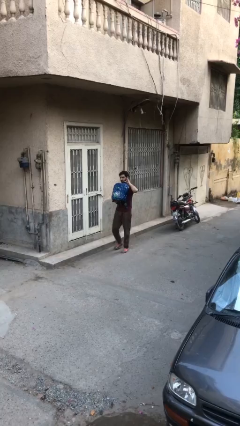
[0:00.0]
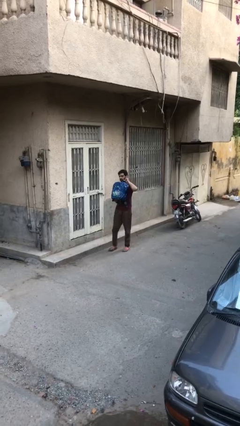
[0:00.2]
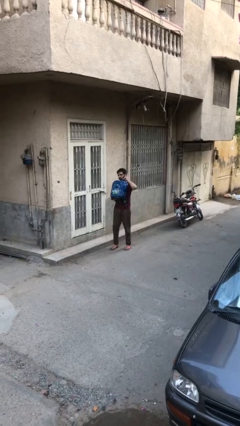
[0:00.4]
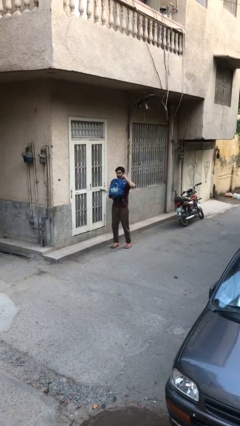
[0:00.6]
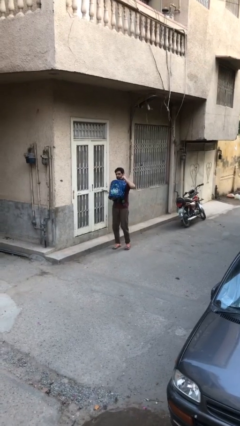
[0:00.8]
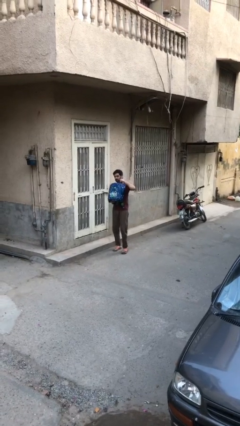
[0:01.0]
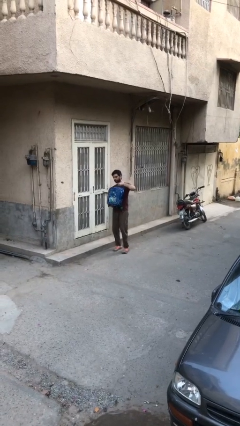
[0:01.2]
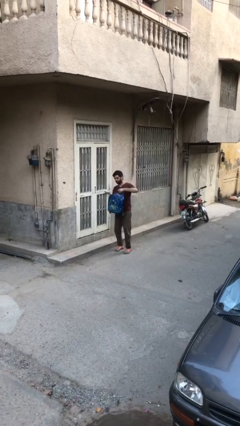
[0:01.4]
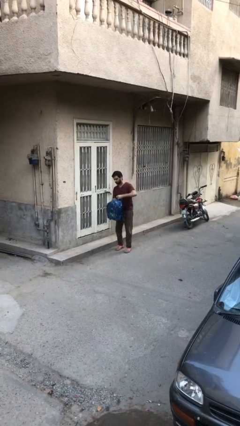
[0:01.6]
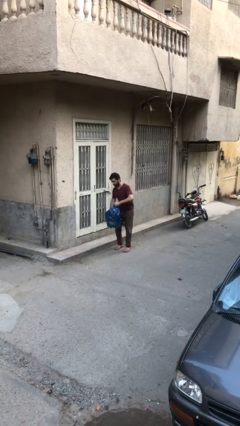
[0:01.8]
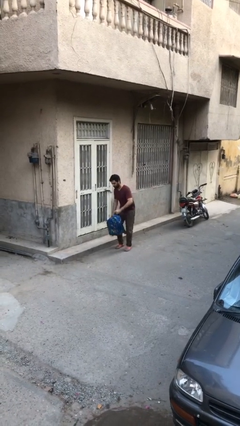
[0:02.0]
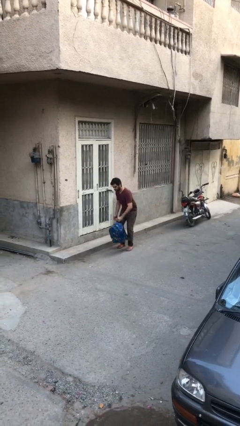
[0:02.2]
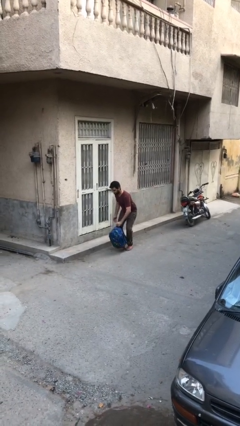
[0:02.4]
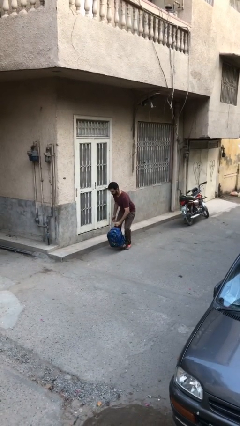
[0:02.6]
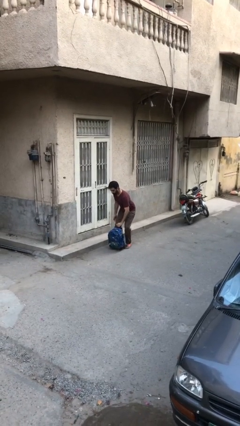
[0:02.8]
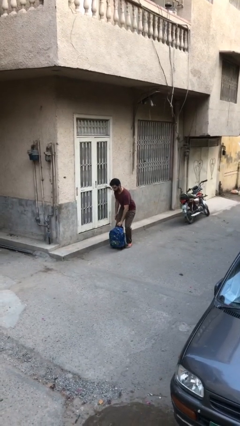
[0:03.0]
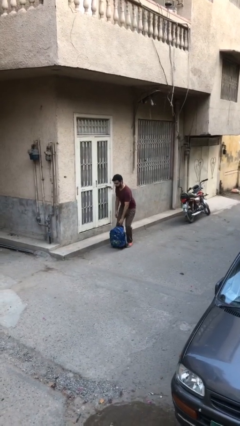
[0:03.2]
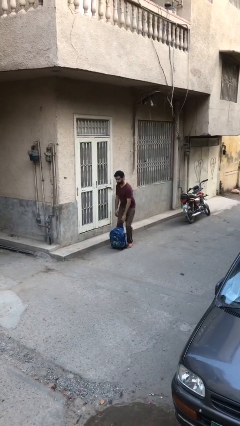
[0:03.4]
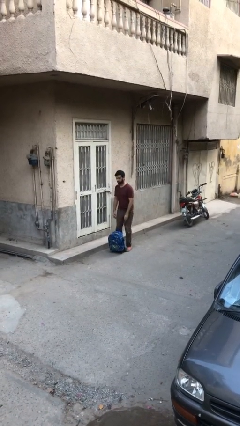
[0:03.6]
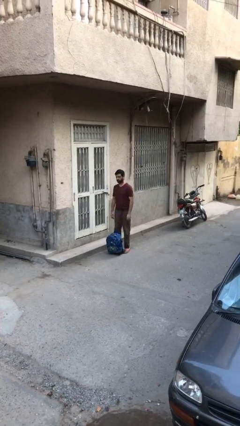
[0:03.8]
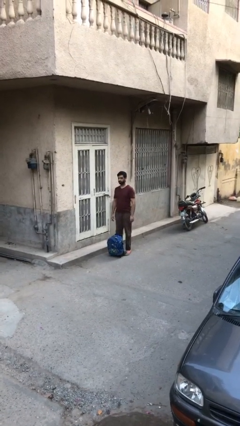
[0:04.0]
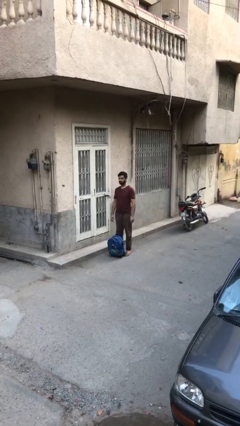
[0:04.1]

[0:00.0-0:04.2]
person puts down object on floor

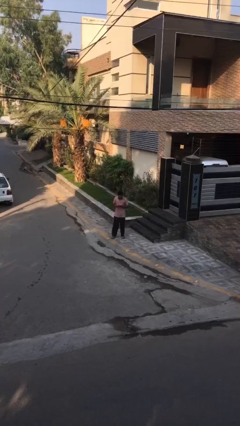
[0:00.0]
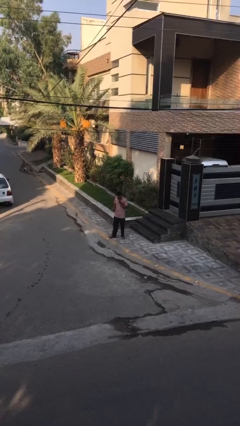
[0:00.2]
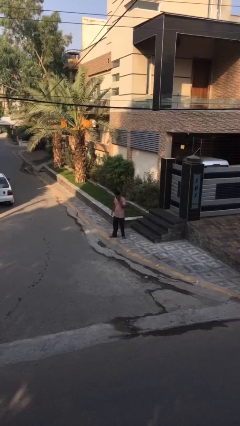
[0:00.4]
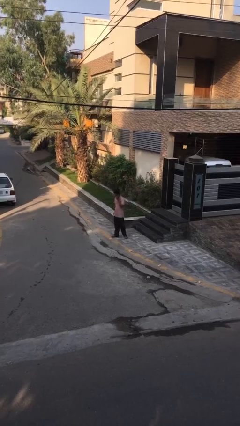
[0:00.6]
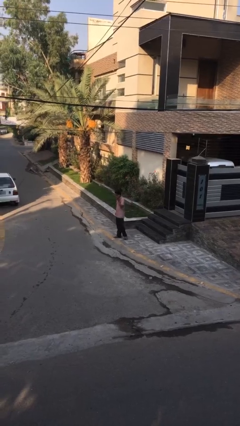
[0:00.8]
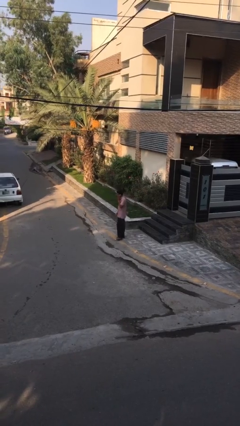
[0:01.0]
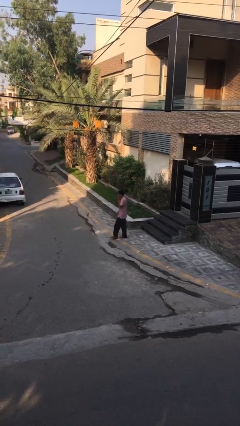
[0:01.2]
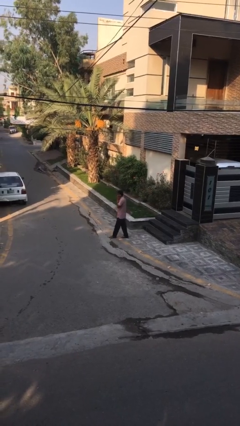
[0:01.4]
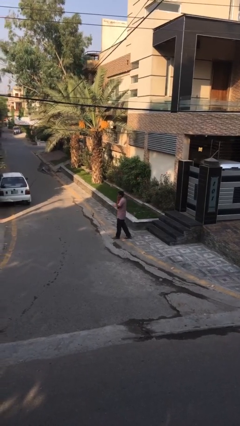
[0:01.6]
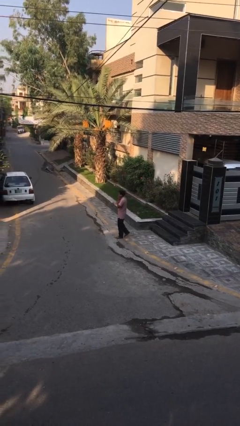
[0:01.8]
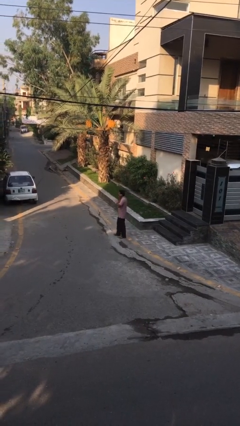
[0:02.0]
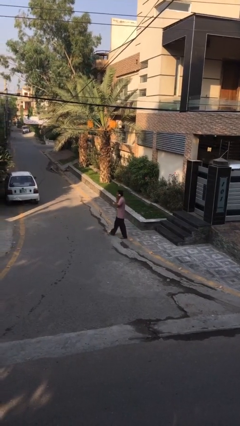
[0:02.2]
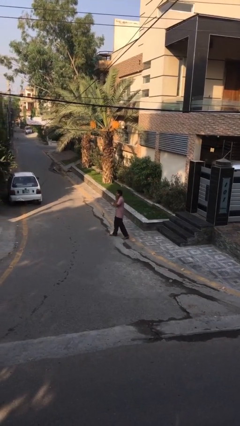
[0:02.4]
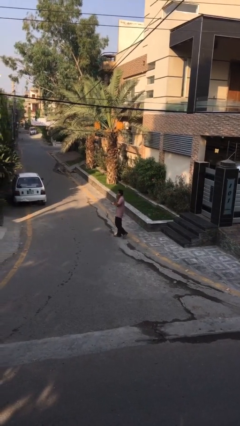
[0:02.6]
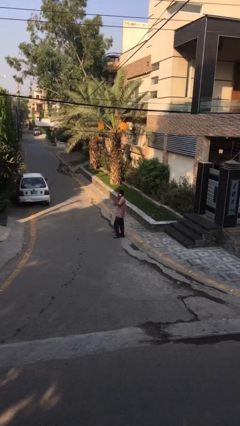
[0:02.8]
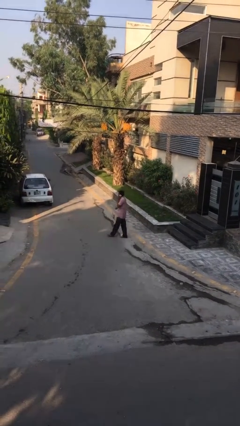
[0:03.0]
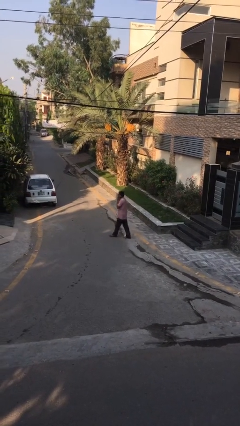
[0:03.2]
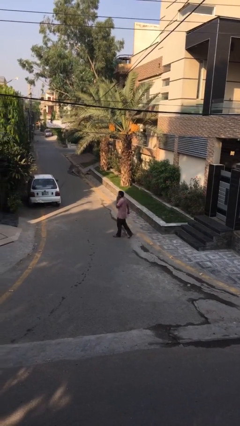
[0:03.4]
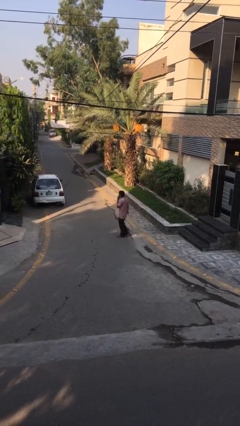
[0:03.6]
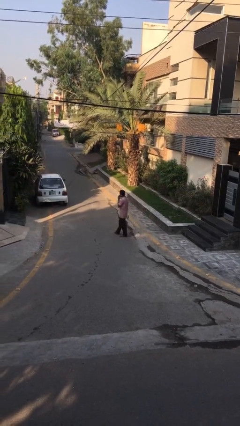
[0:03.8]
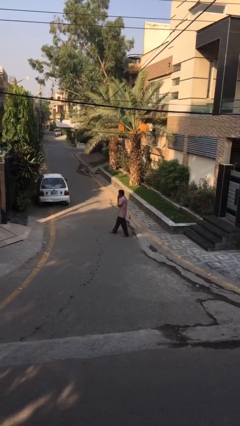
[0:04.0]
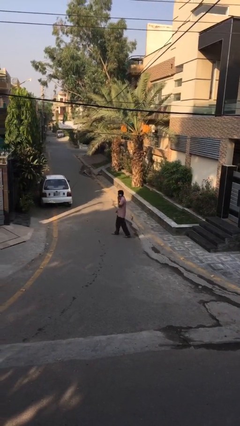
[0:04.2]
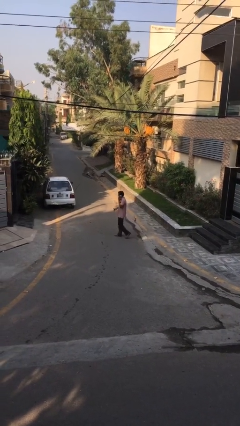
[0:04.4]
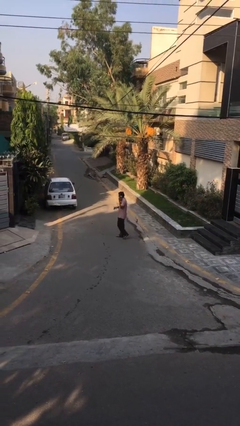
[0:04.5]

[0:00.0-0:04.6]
person talks on phone

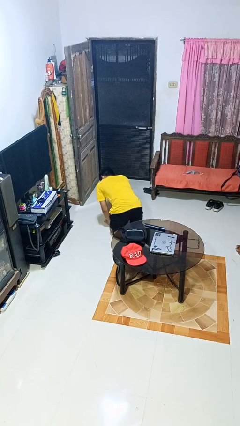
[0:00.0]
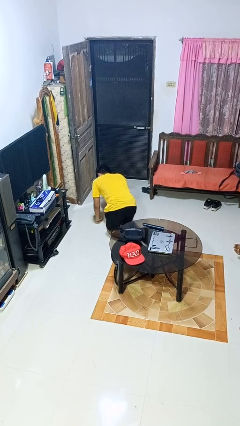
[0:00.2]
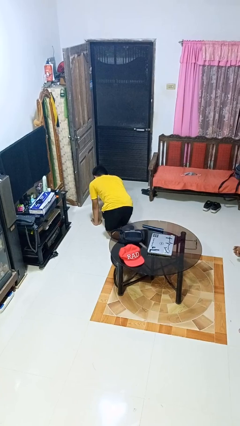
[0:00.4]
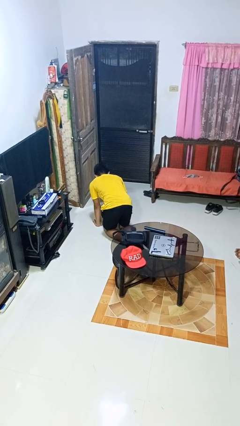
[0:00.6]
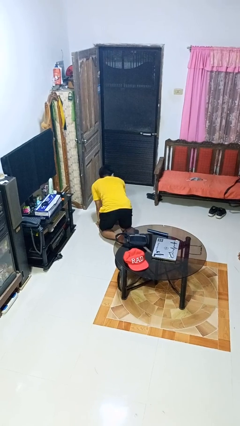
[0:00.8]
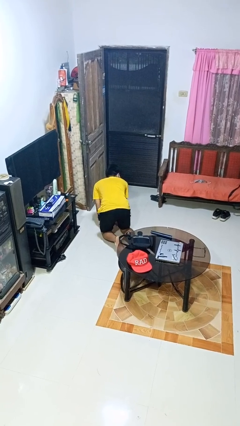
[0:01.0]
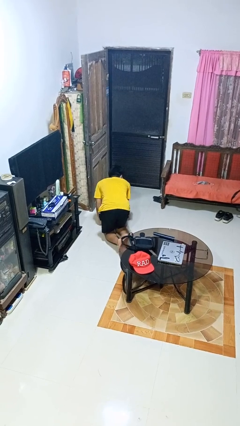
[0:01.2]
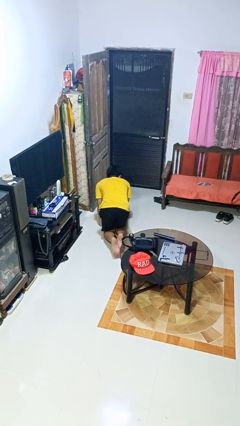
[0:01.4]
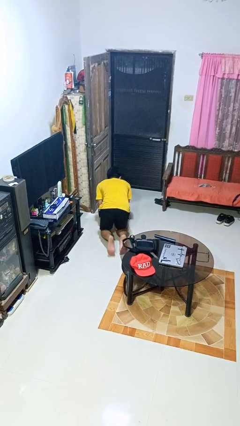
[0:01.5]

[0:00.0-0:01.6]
person crawls

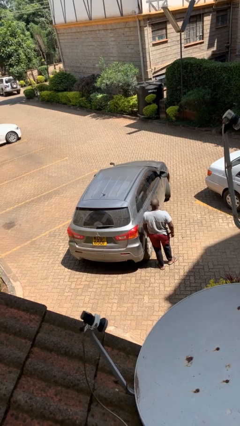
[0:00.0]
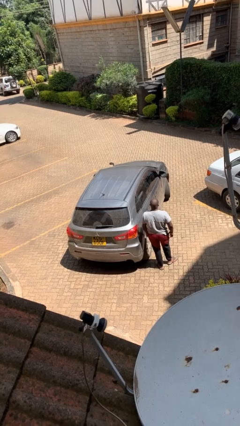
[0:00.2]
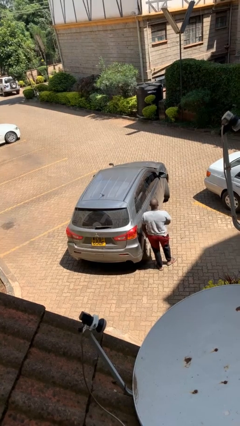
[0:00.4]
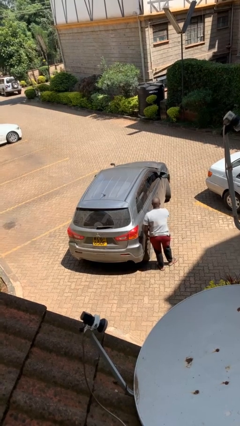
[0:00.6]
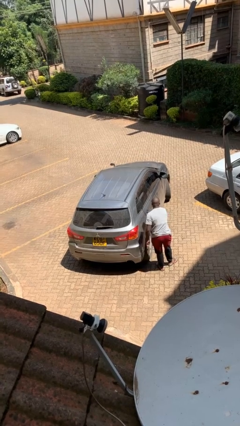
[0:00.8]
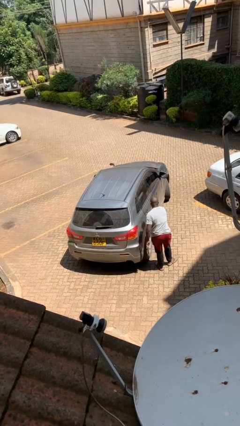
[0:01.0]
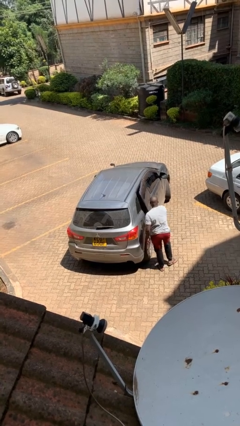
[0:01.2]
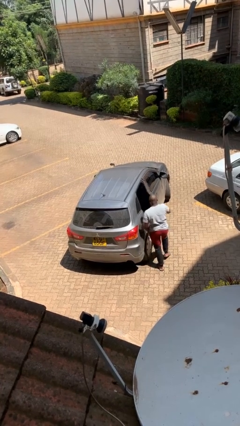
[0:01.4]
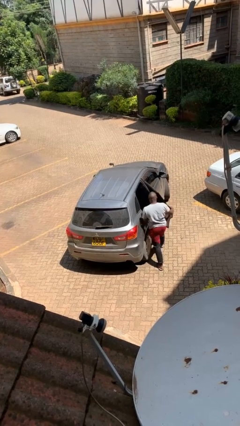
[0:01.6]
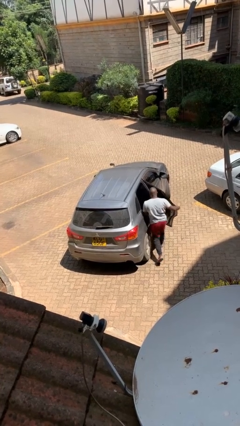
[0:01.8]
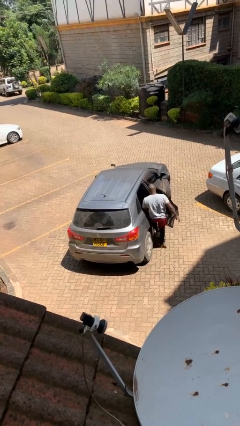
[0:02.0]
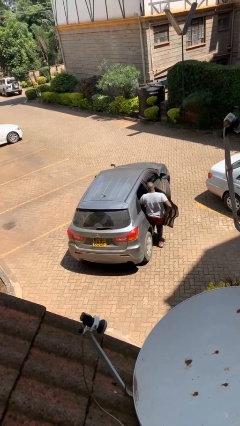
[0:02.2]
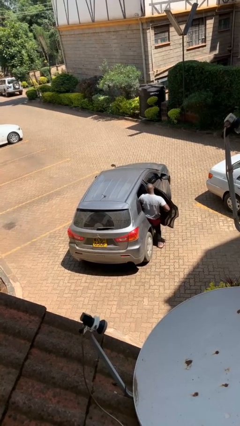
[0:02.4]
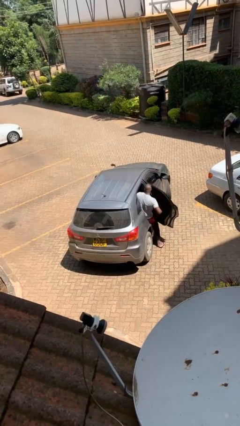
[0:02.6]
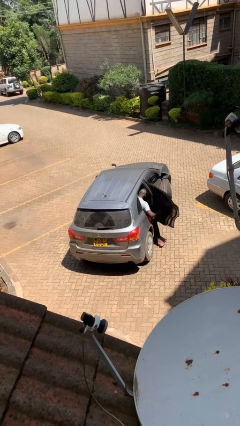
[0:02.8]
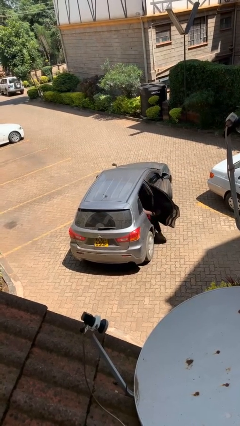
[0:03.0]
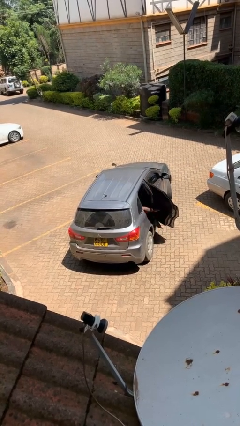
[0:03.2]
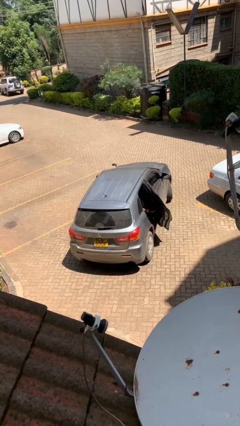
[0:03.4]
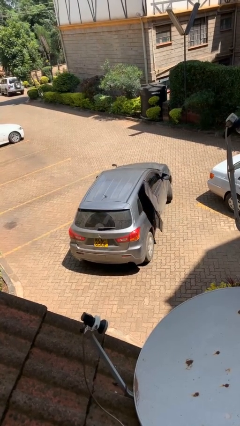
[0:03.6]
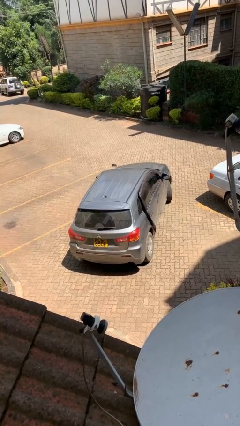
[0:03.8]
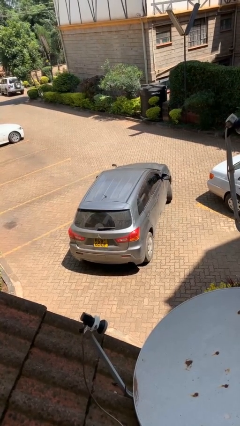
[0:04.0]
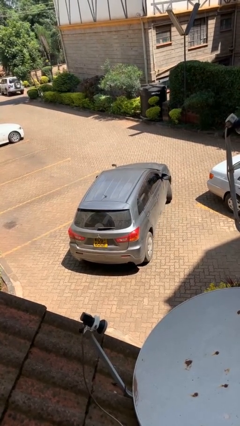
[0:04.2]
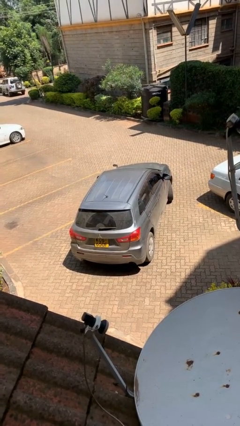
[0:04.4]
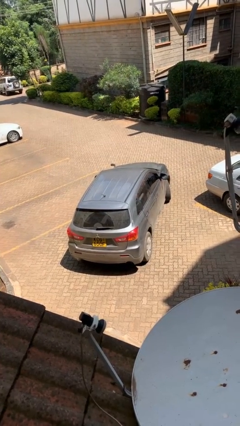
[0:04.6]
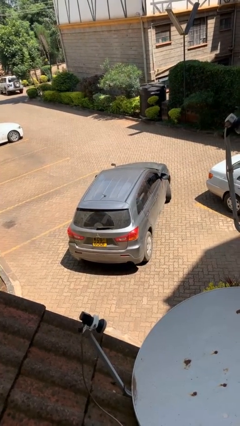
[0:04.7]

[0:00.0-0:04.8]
car picks up person

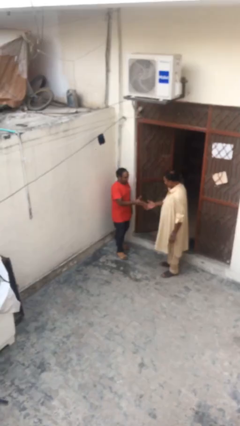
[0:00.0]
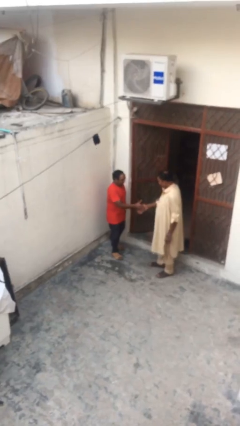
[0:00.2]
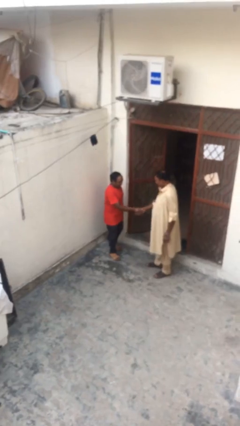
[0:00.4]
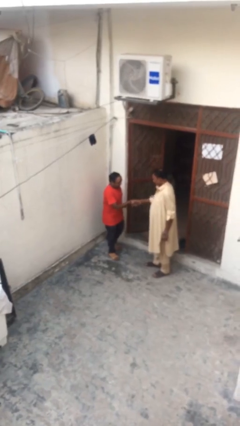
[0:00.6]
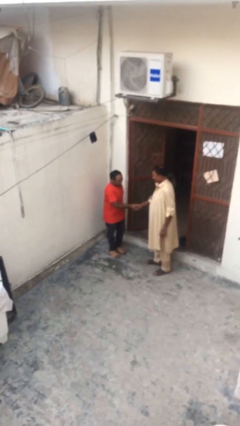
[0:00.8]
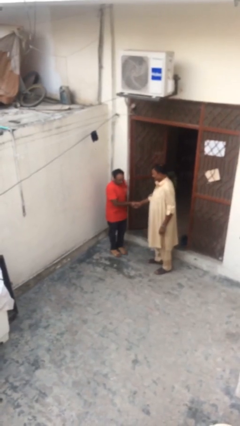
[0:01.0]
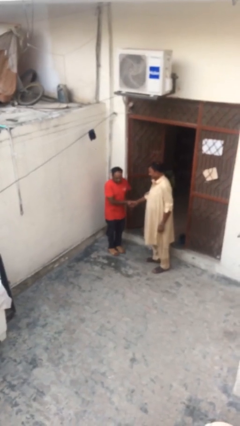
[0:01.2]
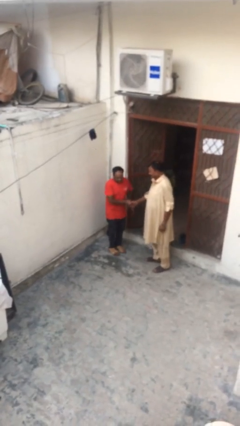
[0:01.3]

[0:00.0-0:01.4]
person shakes hand

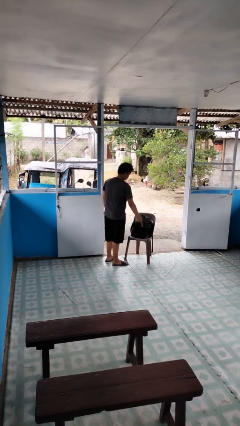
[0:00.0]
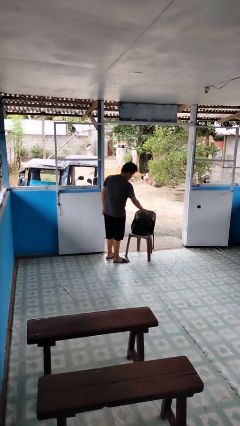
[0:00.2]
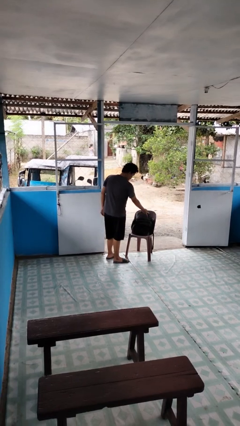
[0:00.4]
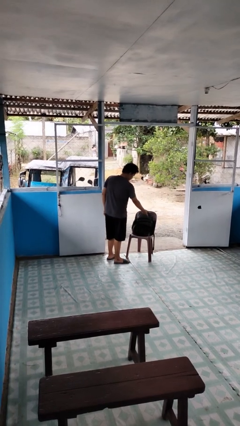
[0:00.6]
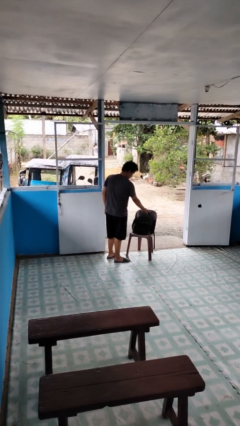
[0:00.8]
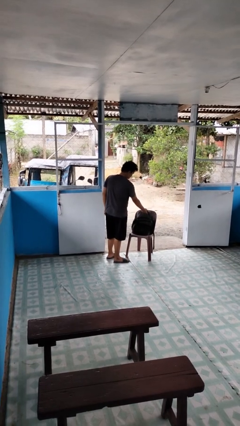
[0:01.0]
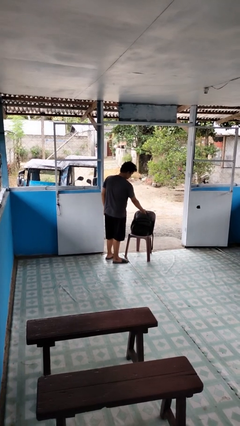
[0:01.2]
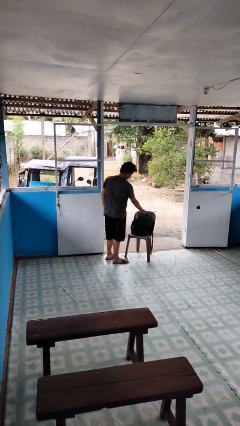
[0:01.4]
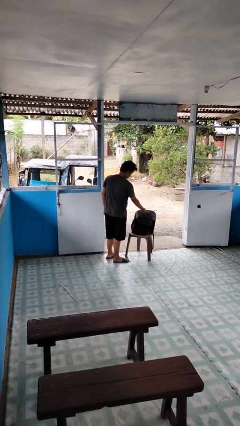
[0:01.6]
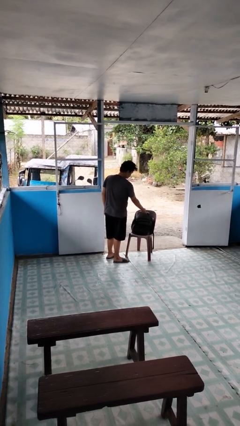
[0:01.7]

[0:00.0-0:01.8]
person taps object with finger
